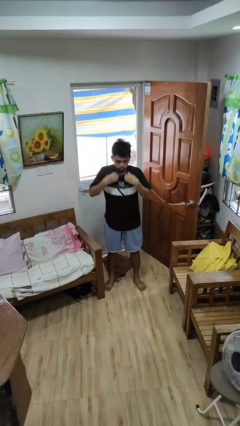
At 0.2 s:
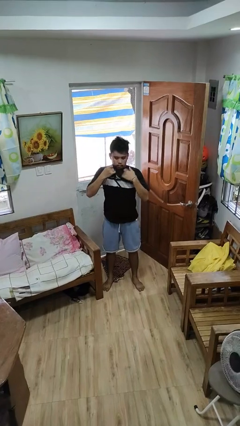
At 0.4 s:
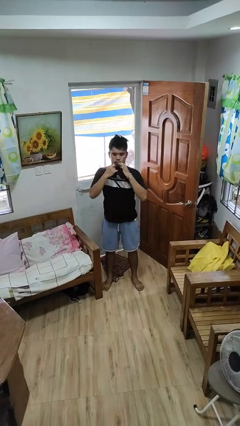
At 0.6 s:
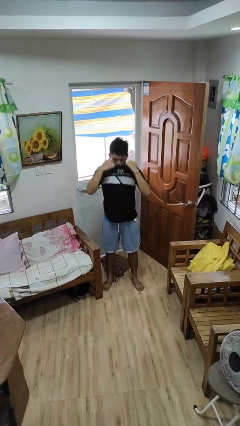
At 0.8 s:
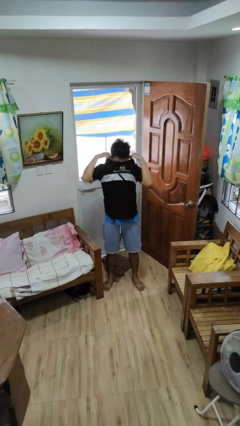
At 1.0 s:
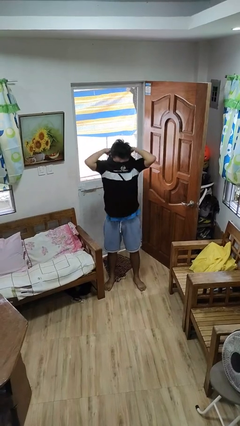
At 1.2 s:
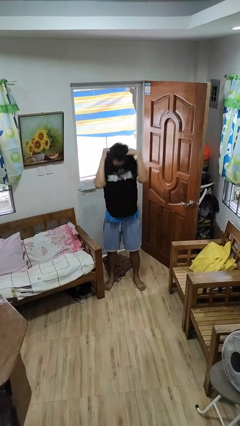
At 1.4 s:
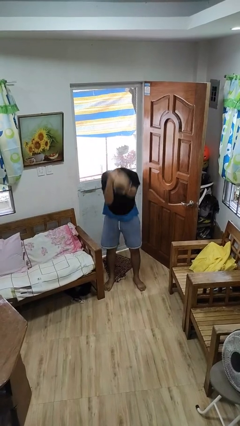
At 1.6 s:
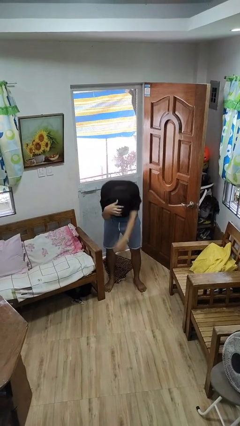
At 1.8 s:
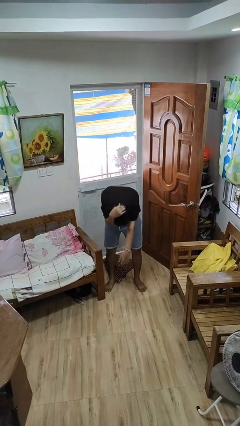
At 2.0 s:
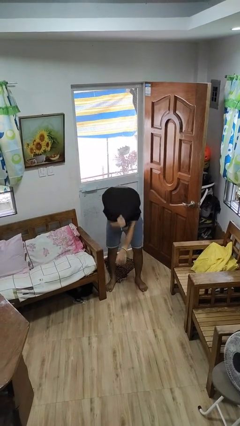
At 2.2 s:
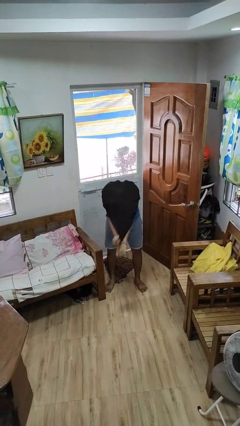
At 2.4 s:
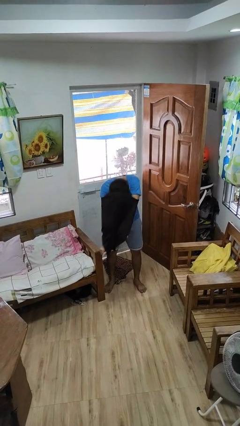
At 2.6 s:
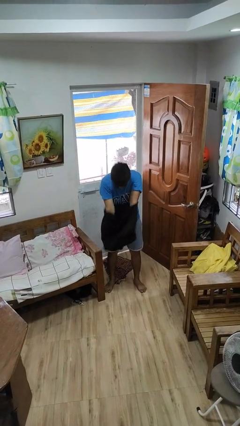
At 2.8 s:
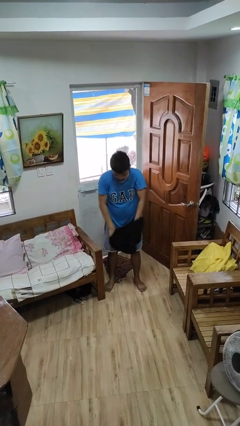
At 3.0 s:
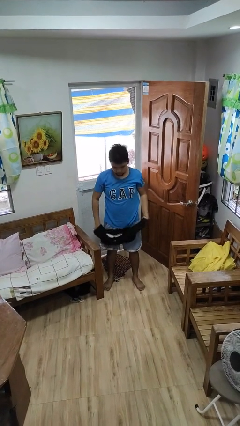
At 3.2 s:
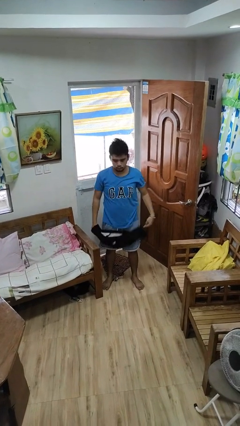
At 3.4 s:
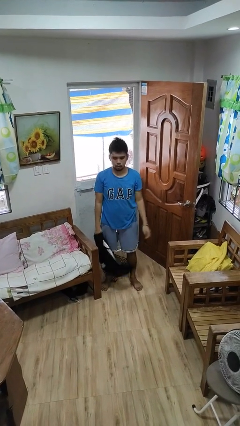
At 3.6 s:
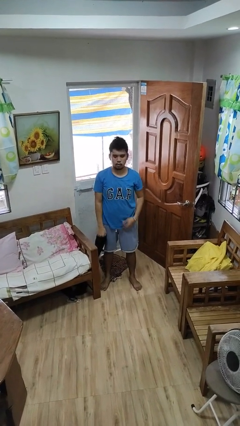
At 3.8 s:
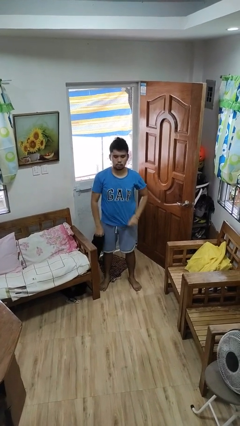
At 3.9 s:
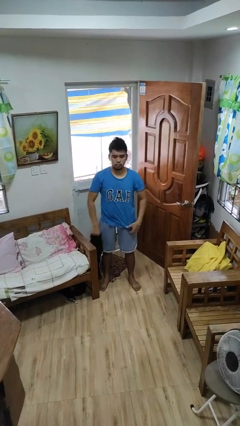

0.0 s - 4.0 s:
person takes off shirt

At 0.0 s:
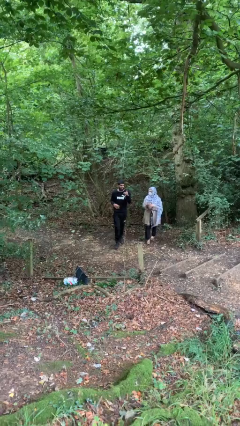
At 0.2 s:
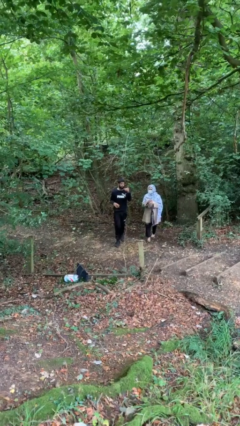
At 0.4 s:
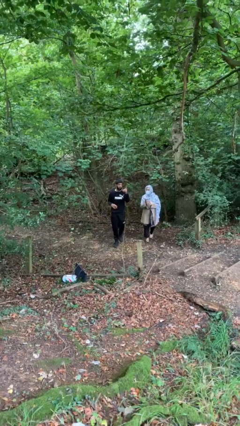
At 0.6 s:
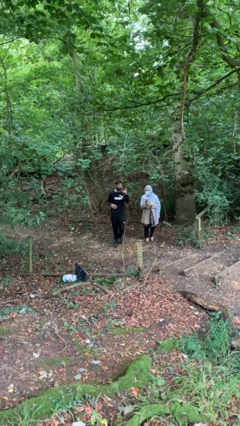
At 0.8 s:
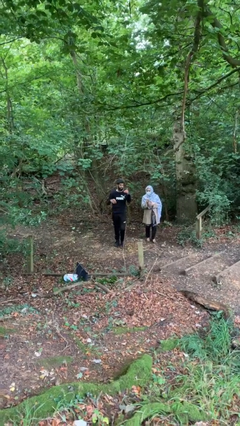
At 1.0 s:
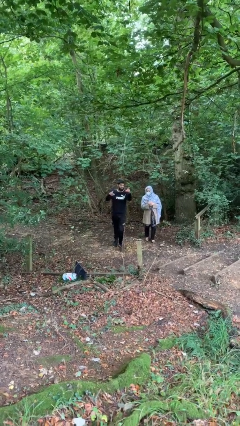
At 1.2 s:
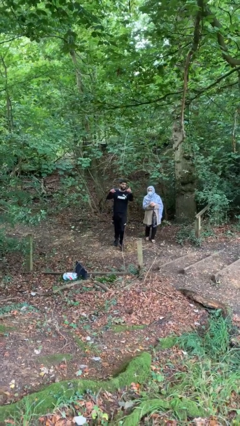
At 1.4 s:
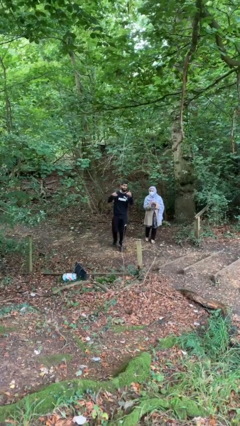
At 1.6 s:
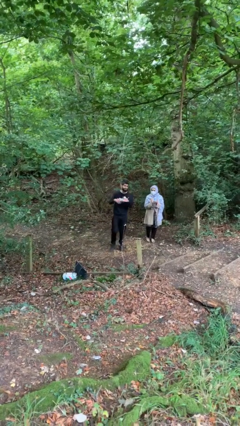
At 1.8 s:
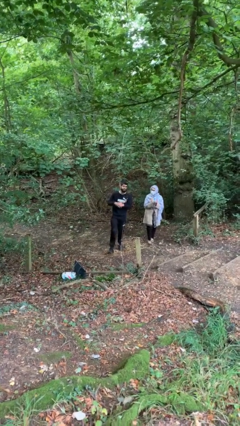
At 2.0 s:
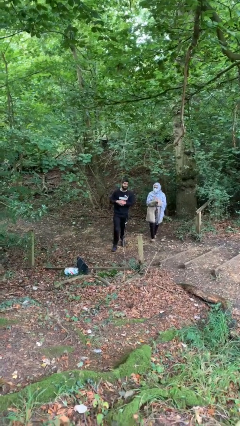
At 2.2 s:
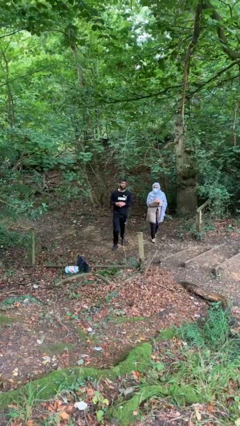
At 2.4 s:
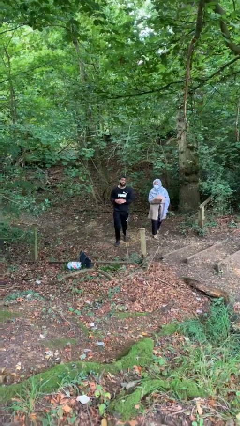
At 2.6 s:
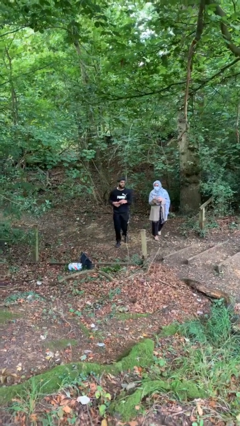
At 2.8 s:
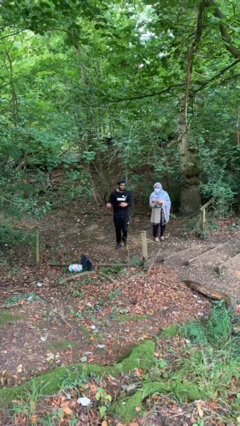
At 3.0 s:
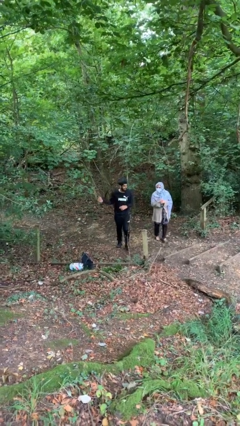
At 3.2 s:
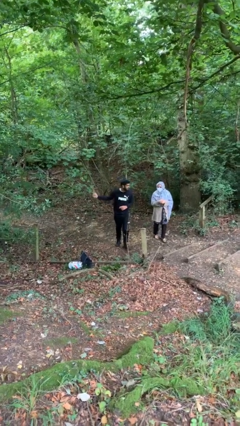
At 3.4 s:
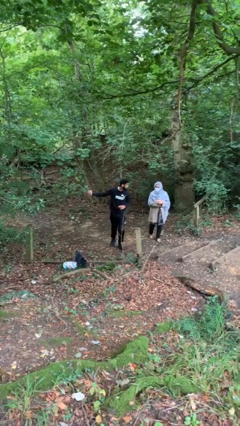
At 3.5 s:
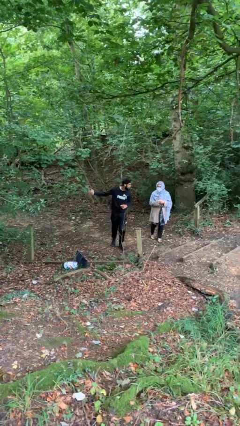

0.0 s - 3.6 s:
person talks to person

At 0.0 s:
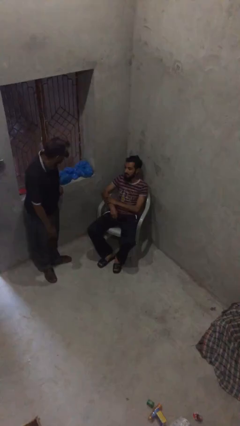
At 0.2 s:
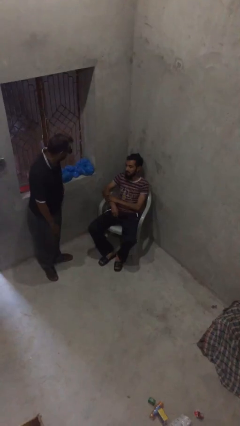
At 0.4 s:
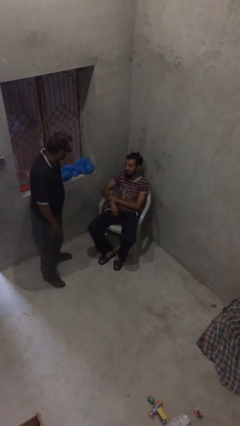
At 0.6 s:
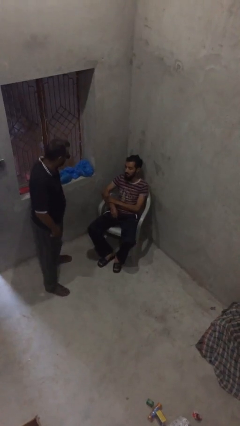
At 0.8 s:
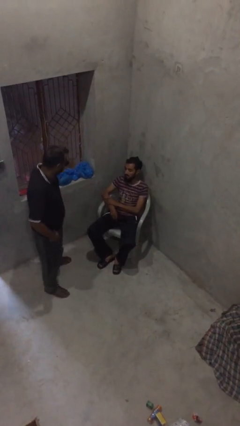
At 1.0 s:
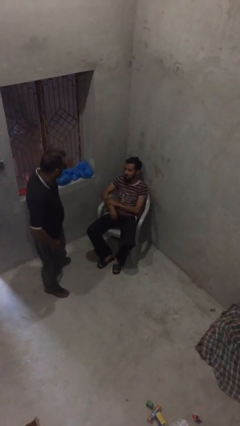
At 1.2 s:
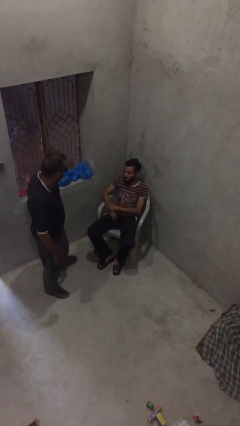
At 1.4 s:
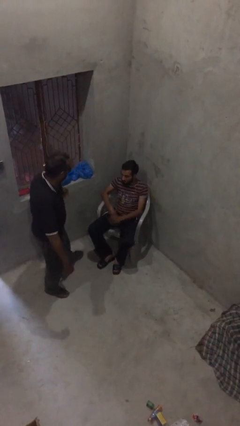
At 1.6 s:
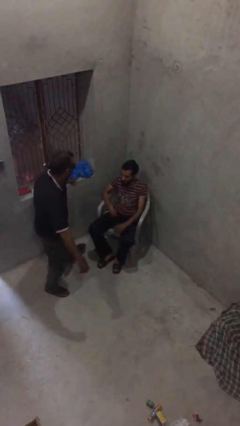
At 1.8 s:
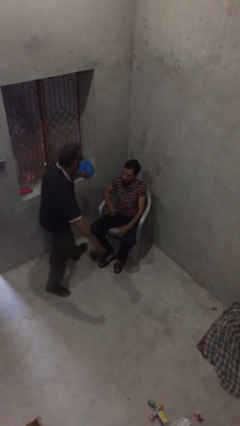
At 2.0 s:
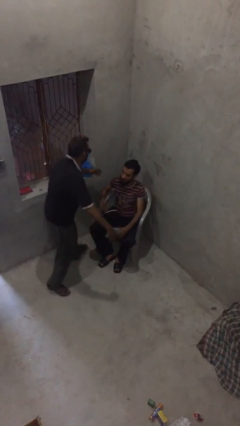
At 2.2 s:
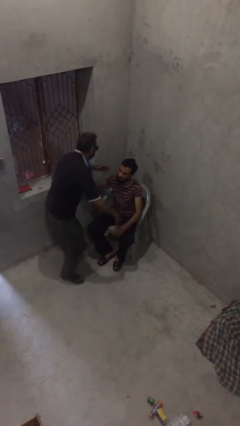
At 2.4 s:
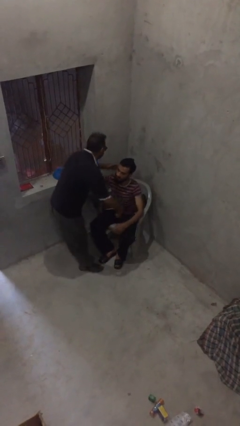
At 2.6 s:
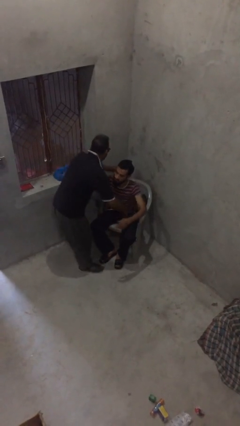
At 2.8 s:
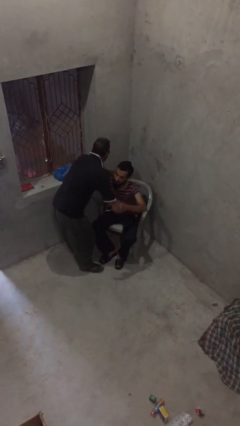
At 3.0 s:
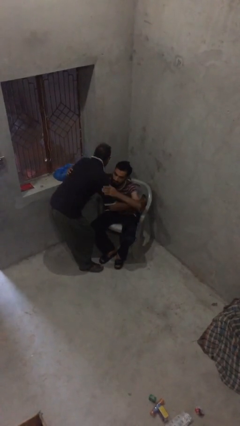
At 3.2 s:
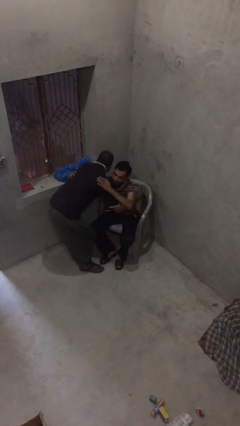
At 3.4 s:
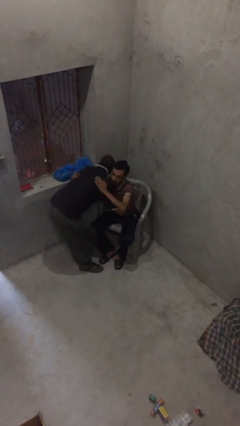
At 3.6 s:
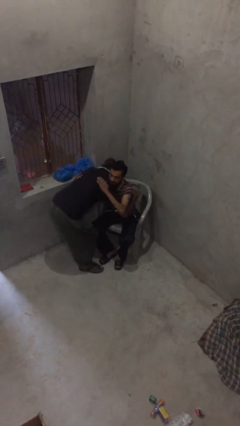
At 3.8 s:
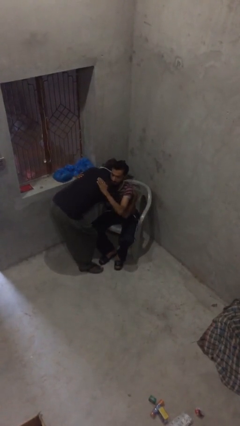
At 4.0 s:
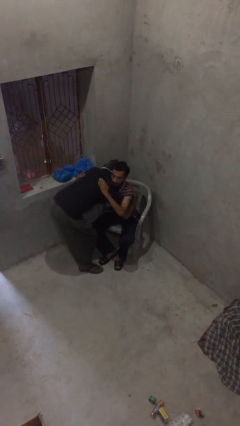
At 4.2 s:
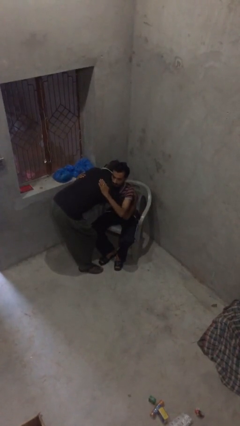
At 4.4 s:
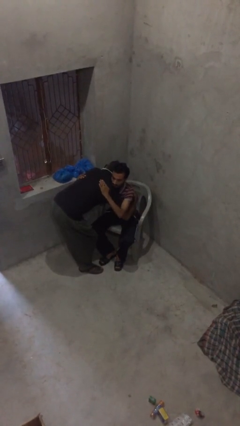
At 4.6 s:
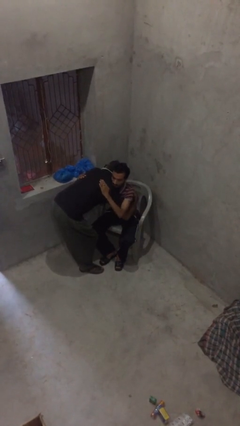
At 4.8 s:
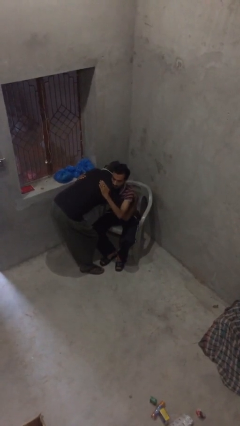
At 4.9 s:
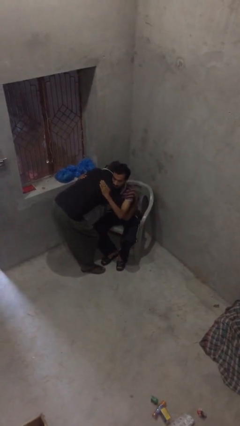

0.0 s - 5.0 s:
person embraces person

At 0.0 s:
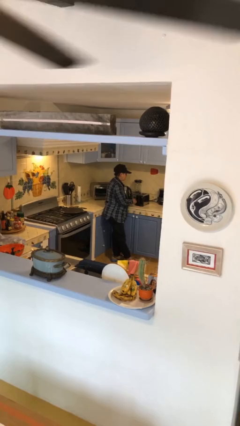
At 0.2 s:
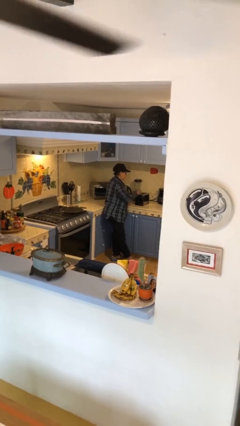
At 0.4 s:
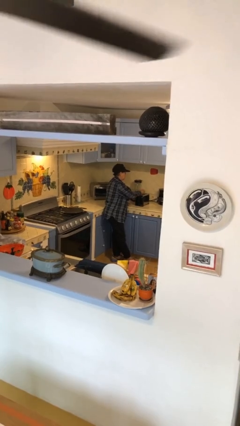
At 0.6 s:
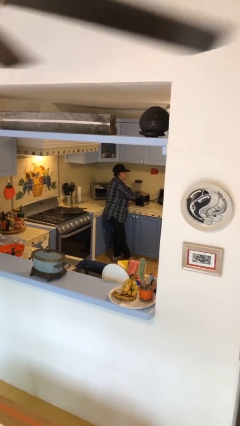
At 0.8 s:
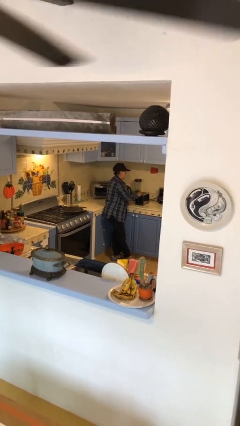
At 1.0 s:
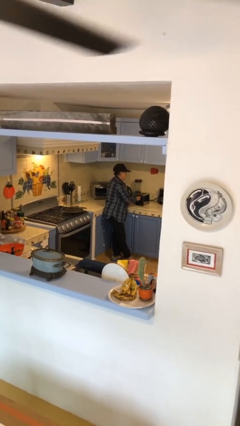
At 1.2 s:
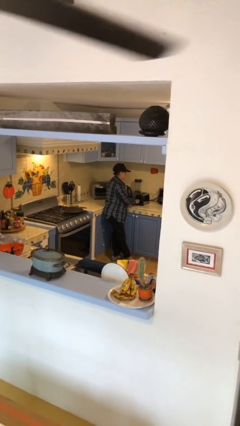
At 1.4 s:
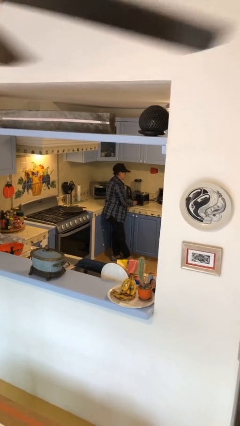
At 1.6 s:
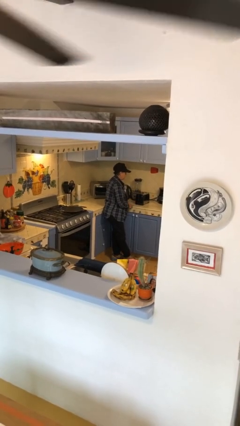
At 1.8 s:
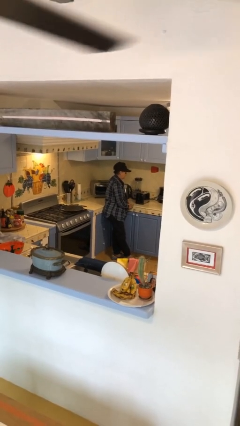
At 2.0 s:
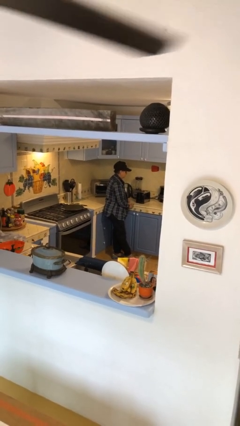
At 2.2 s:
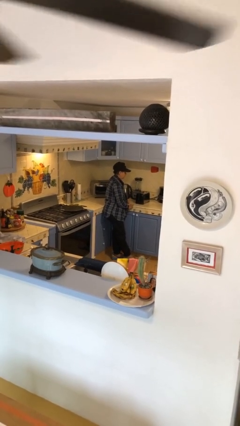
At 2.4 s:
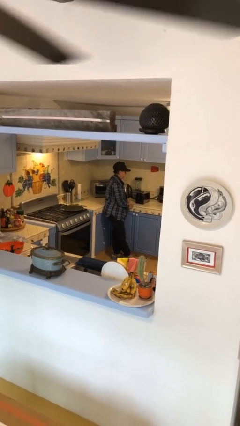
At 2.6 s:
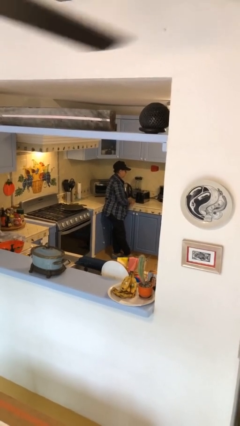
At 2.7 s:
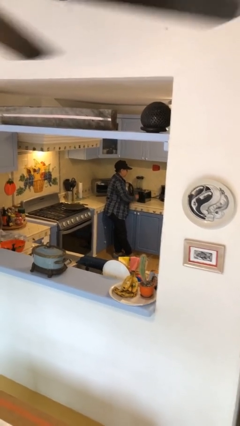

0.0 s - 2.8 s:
person puts object into toaster

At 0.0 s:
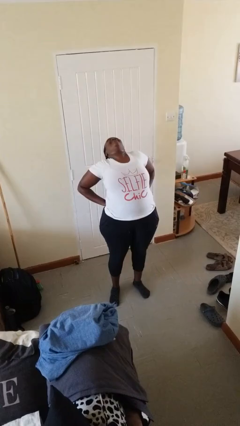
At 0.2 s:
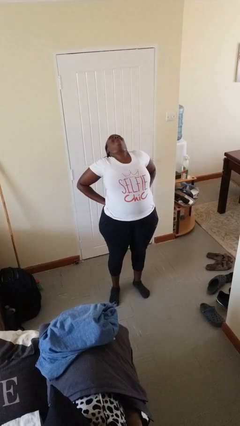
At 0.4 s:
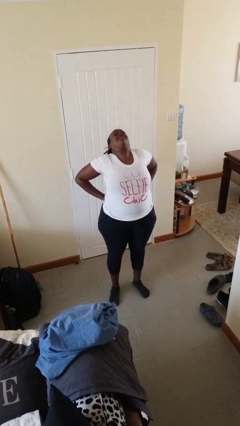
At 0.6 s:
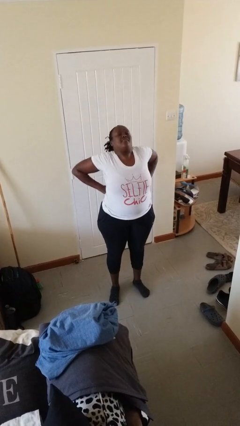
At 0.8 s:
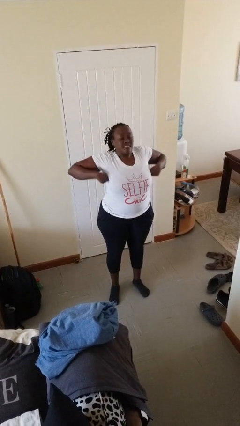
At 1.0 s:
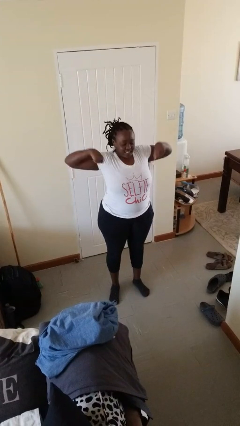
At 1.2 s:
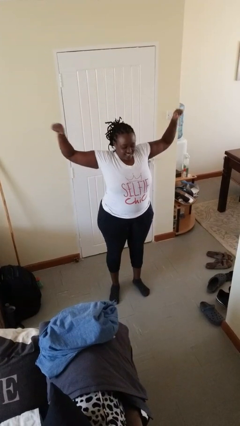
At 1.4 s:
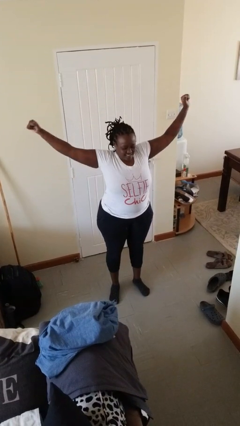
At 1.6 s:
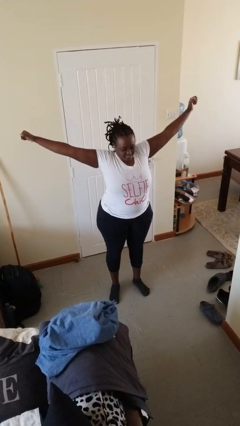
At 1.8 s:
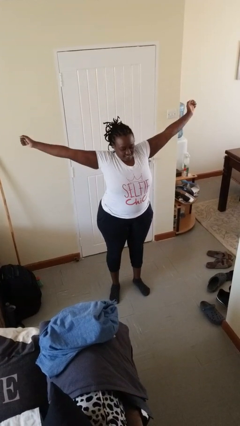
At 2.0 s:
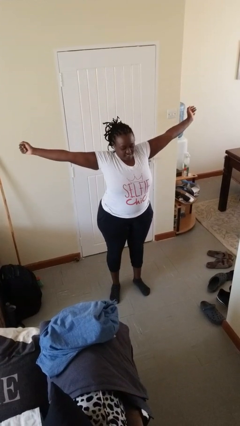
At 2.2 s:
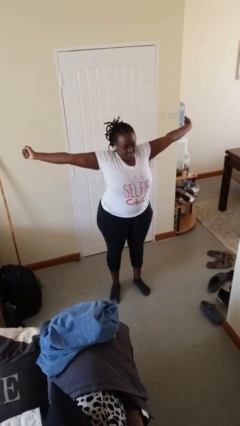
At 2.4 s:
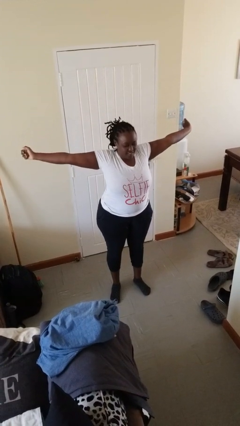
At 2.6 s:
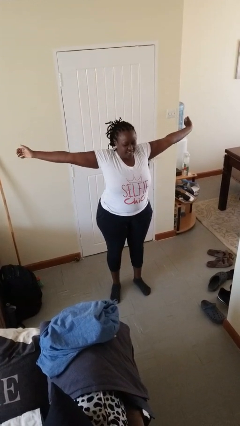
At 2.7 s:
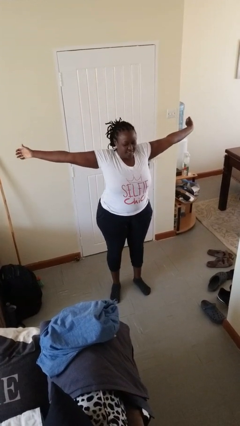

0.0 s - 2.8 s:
person stretches arms to side
